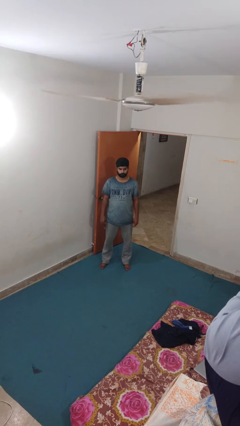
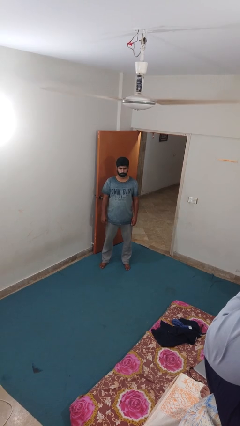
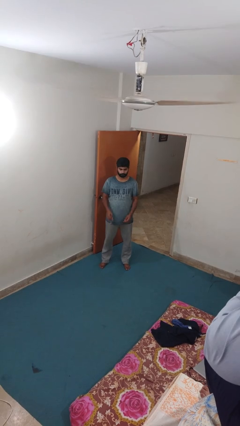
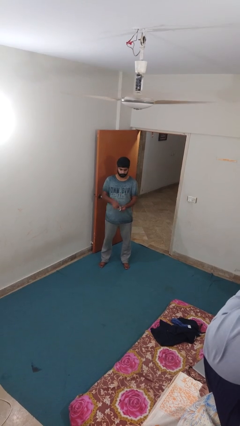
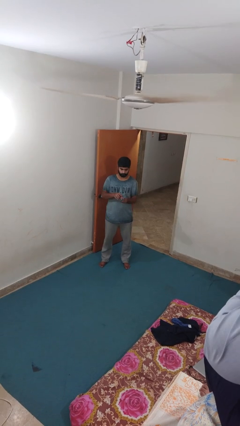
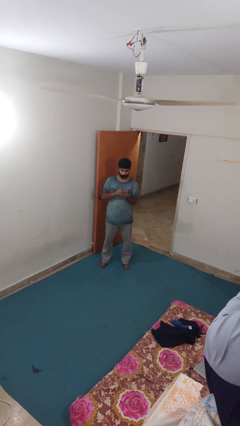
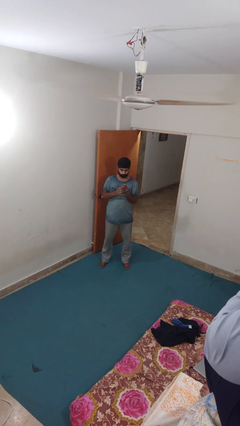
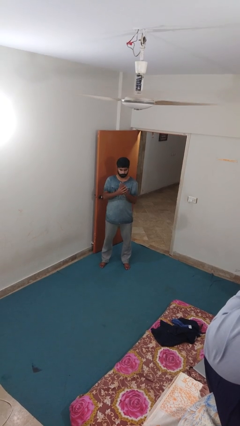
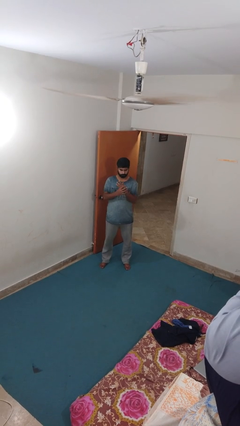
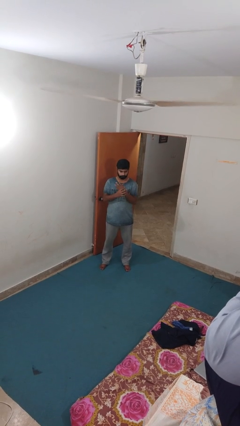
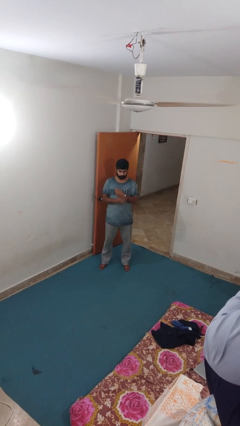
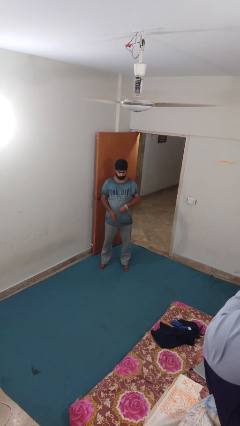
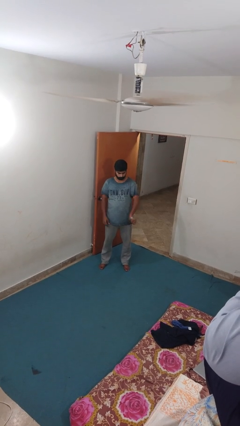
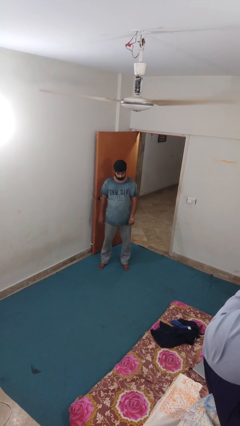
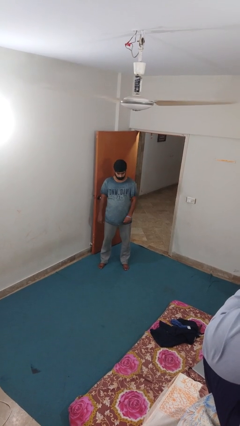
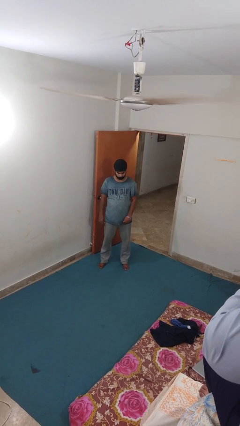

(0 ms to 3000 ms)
person puts on wristwatch

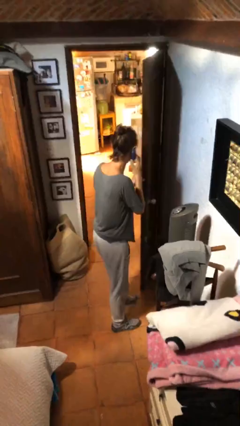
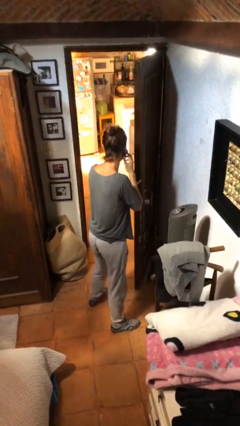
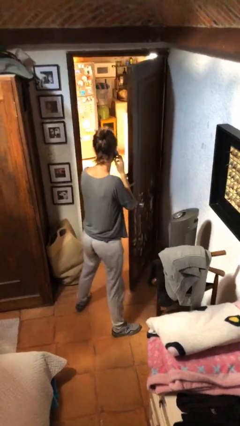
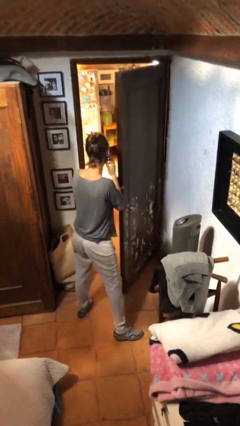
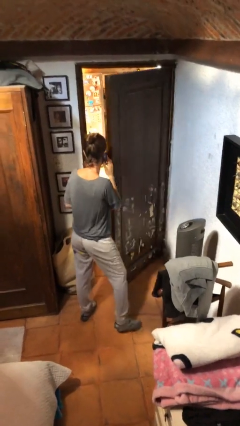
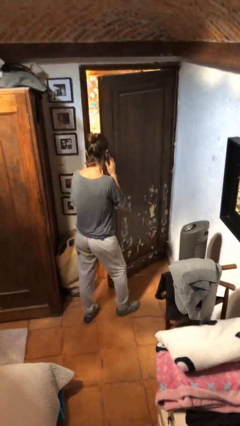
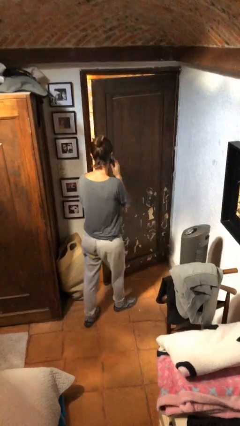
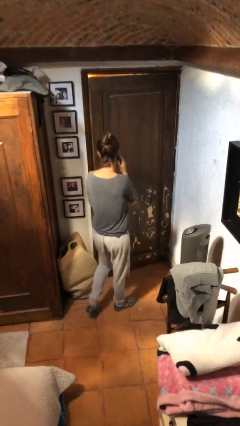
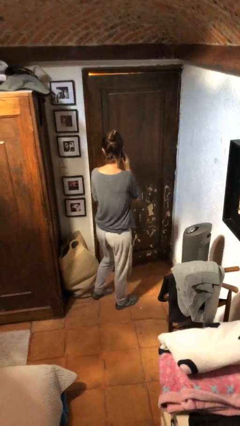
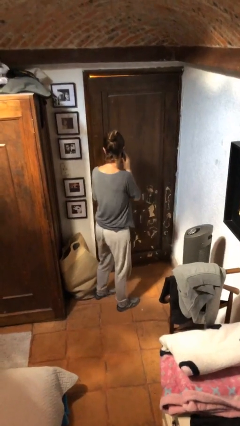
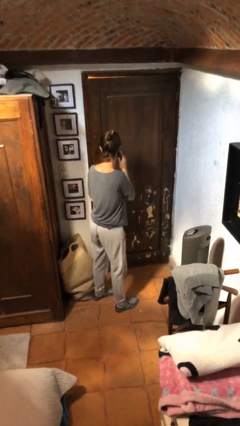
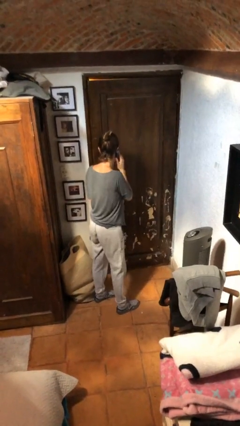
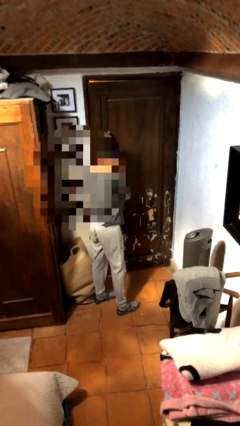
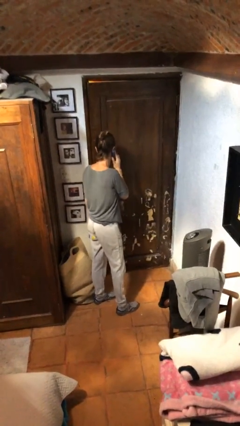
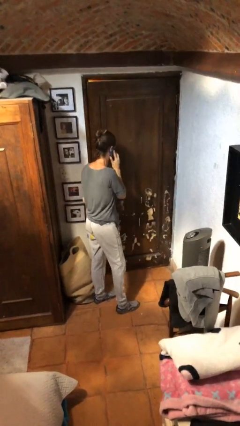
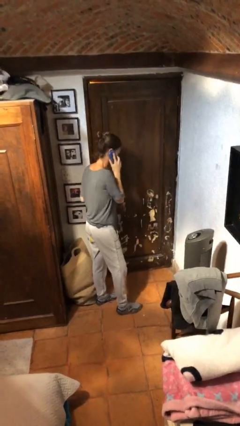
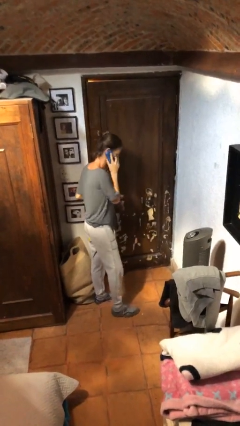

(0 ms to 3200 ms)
person closes facility door

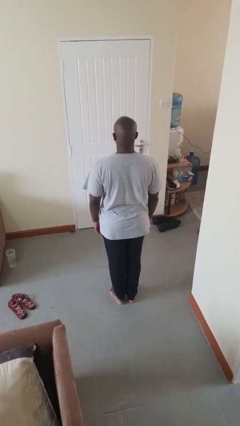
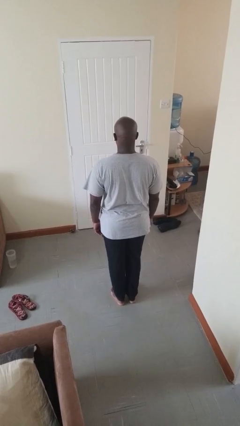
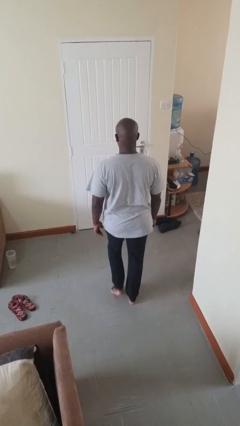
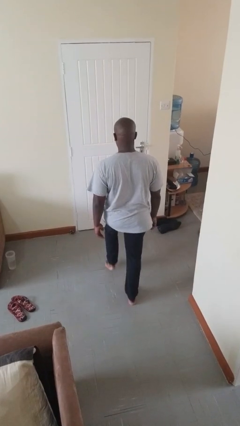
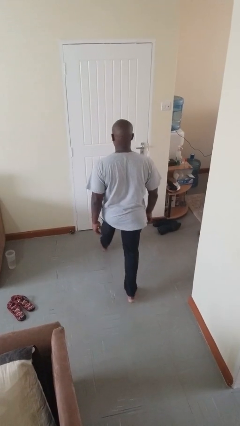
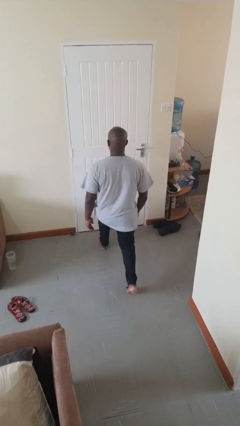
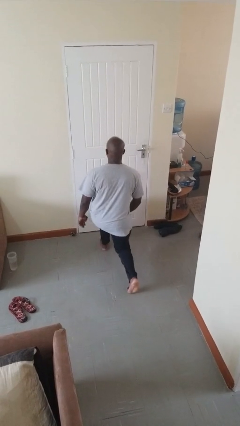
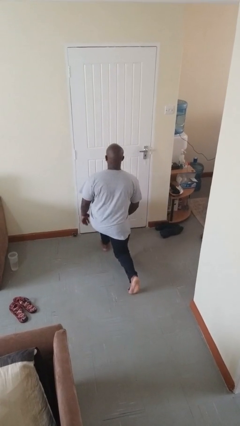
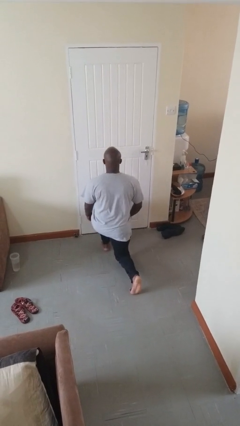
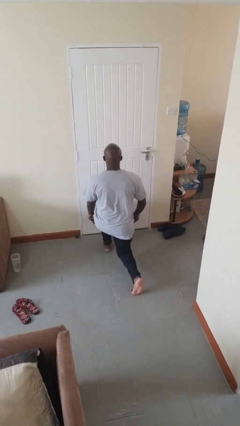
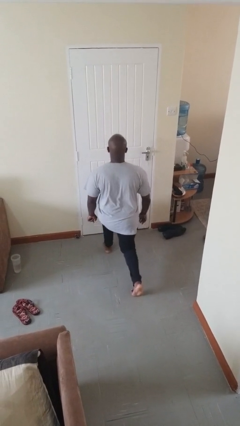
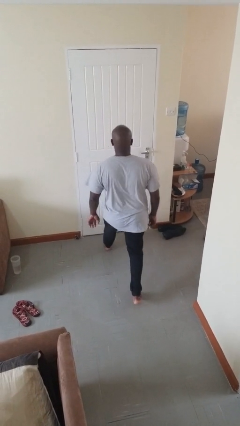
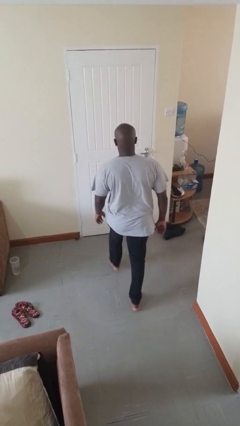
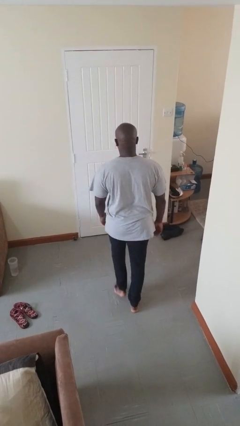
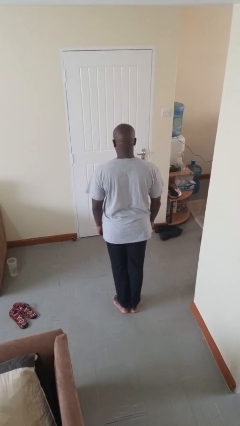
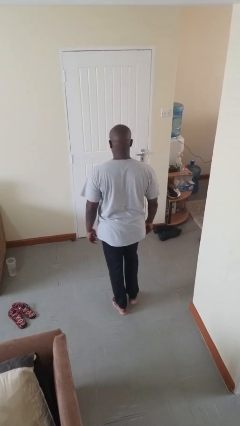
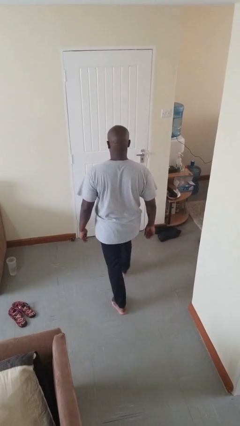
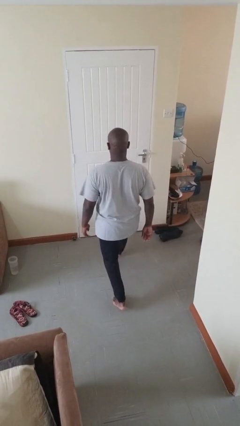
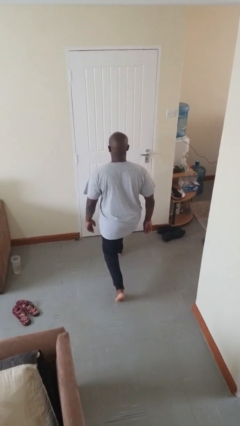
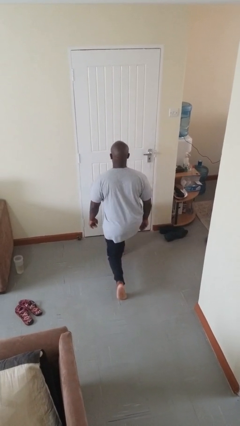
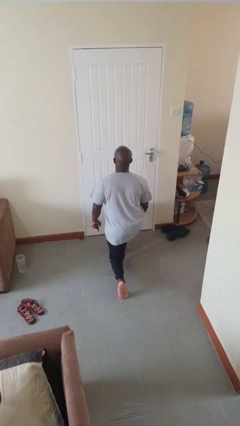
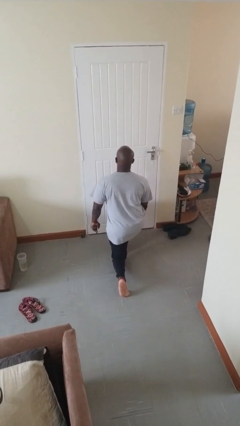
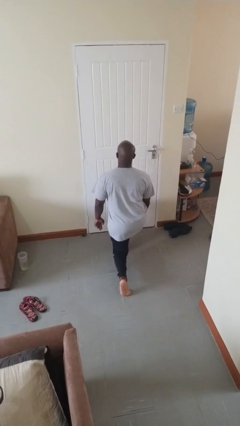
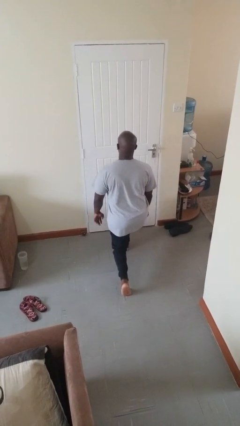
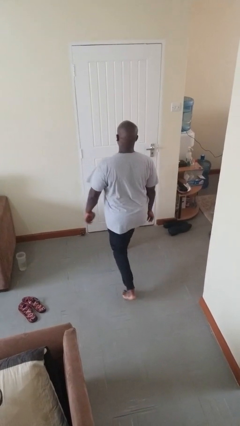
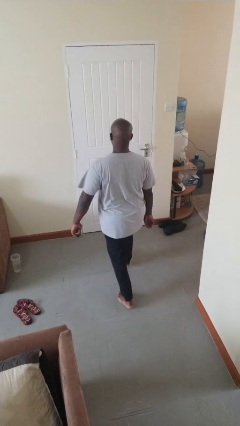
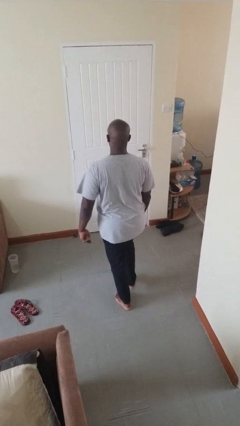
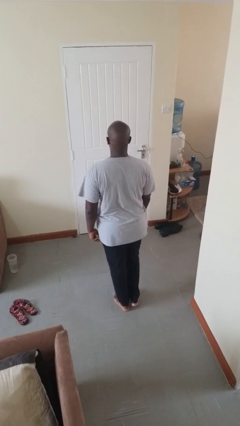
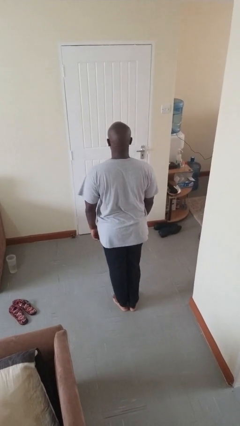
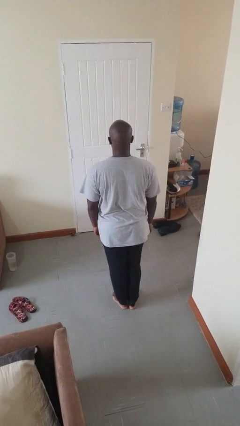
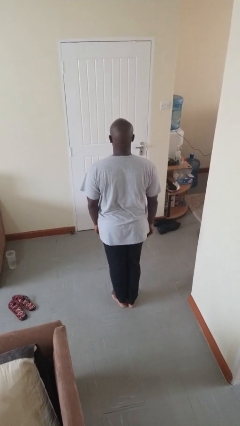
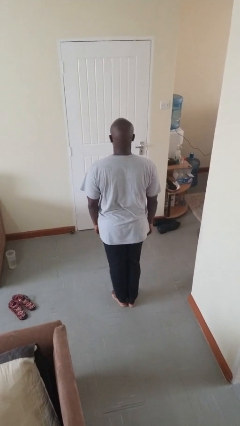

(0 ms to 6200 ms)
person exercises with lunges

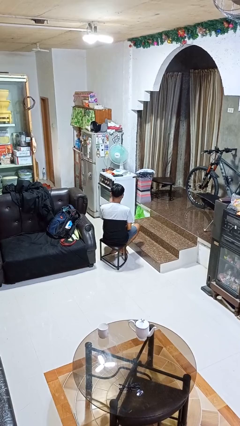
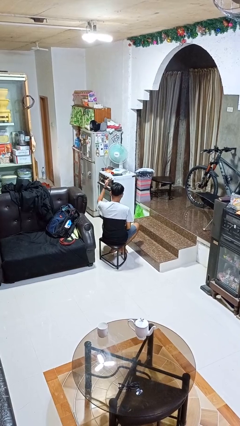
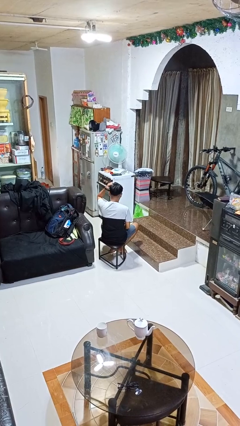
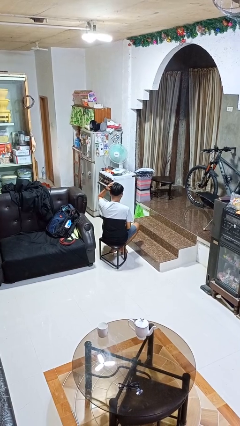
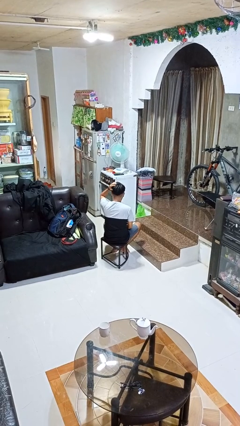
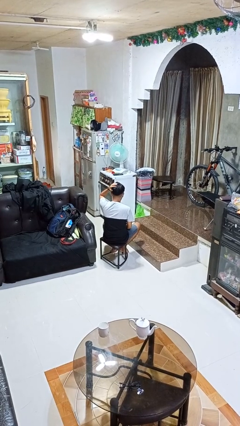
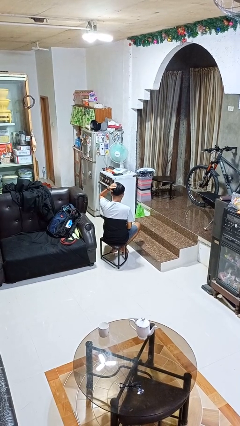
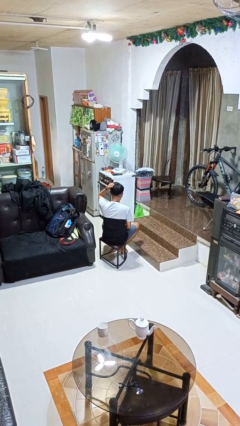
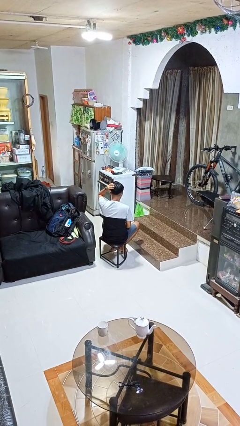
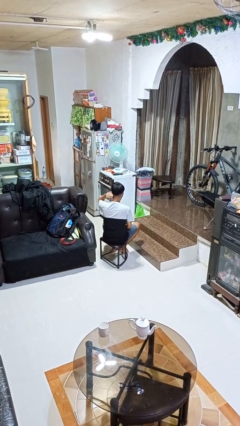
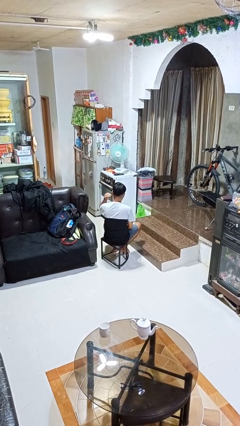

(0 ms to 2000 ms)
person pats head

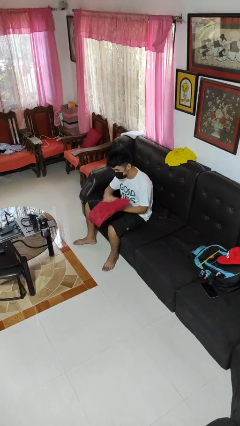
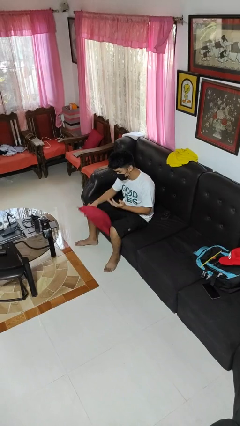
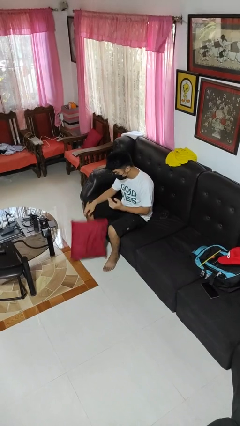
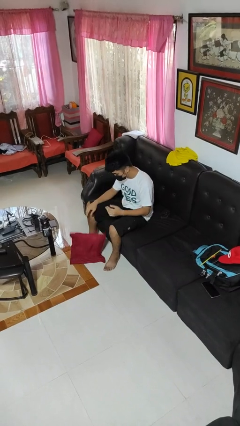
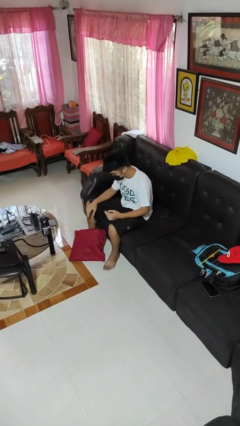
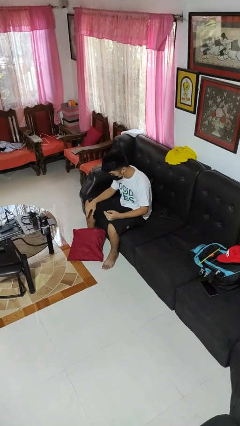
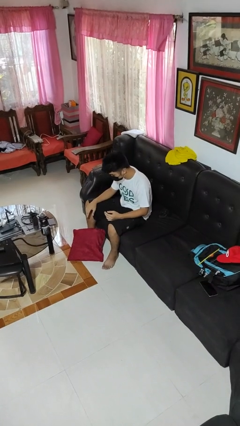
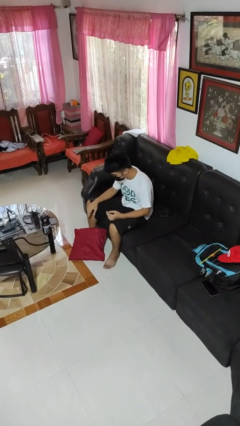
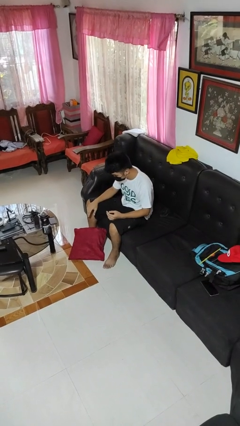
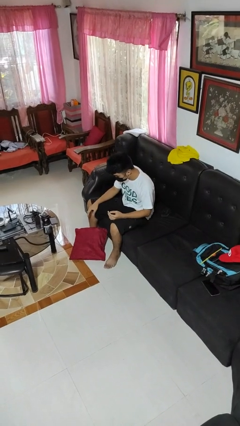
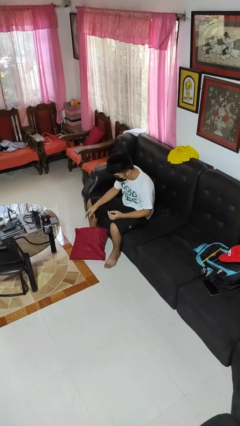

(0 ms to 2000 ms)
person drops object

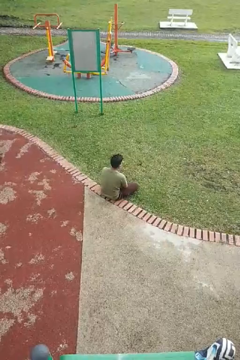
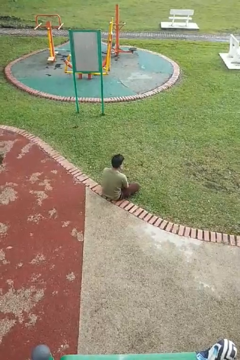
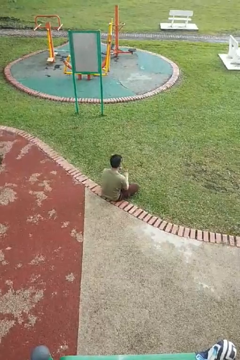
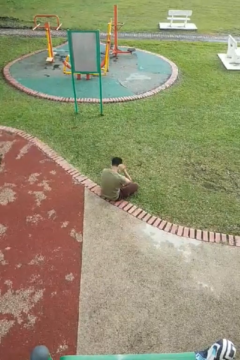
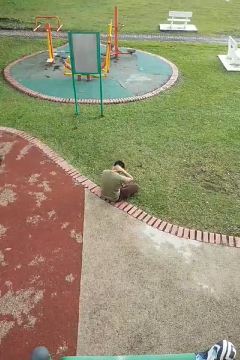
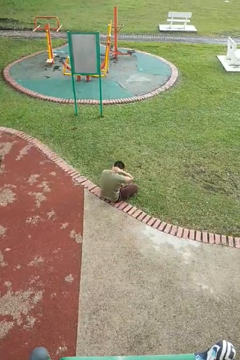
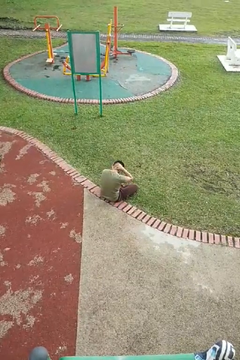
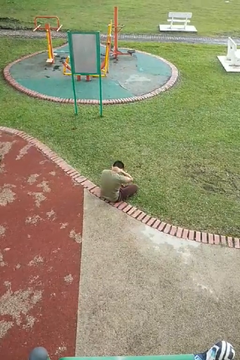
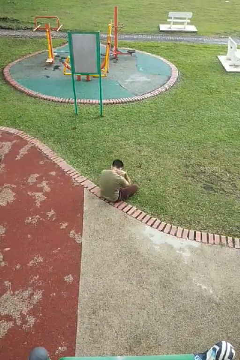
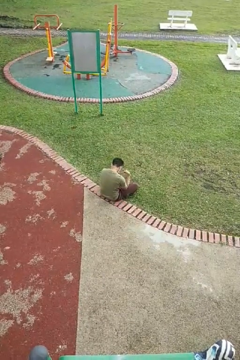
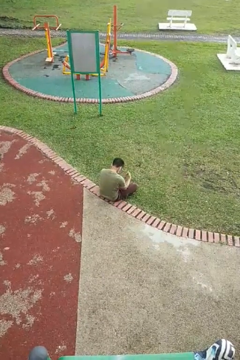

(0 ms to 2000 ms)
person rubs neck
